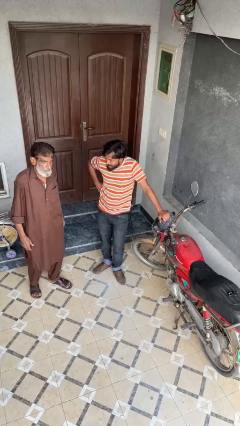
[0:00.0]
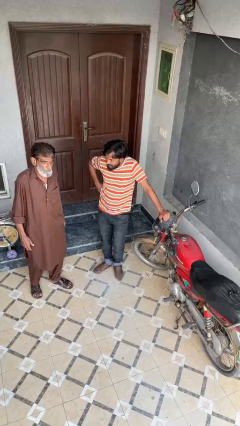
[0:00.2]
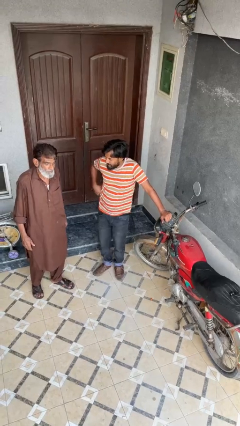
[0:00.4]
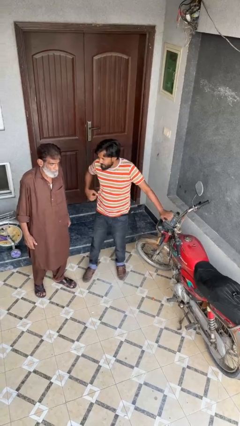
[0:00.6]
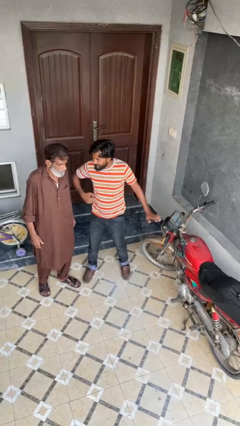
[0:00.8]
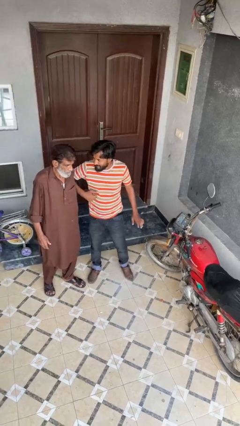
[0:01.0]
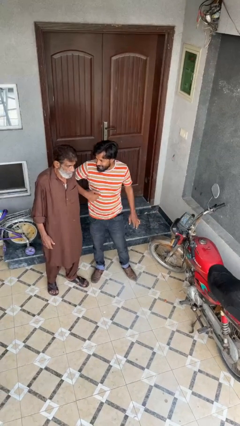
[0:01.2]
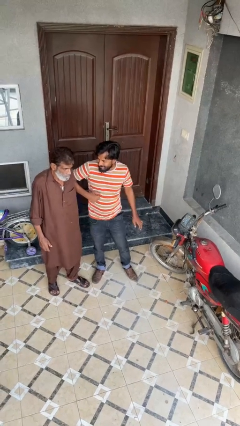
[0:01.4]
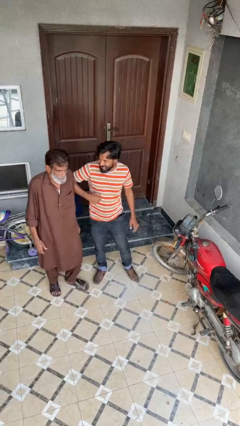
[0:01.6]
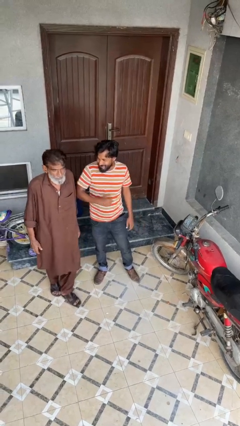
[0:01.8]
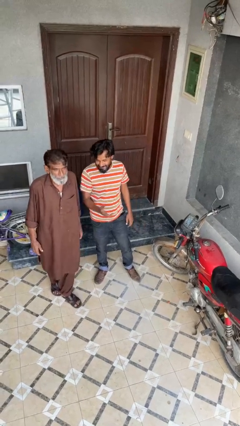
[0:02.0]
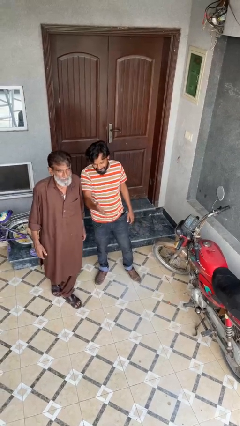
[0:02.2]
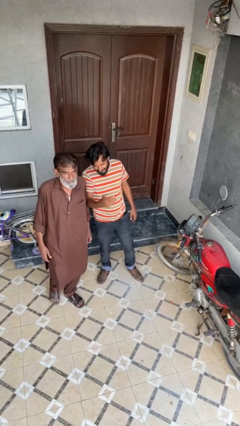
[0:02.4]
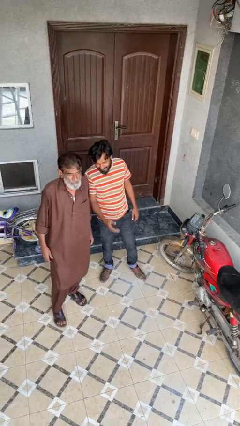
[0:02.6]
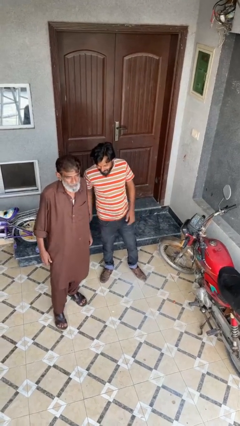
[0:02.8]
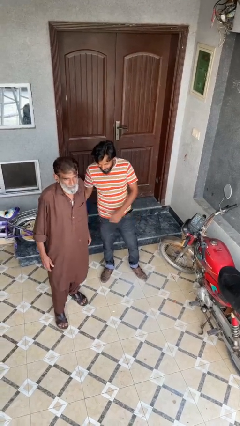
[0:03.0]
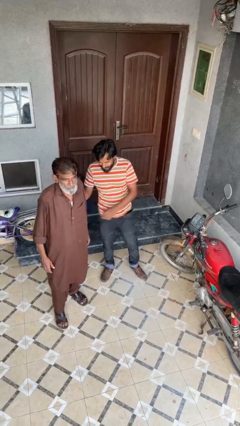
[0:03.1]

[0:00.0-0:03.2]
person nudges person with elbow

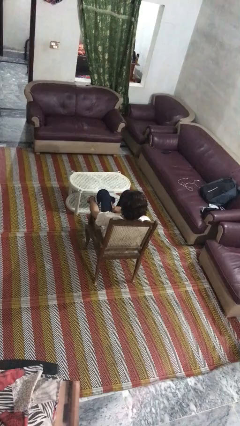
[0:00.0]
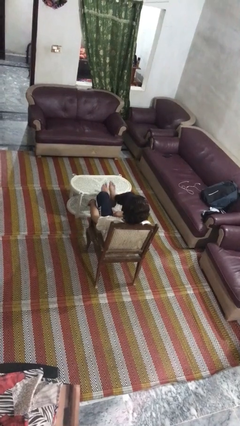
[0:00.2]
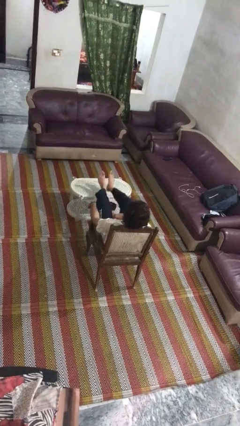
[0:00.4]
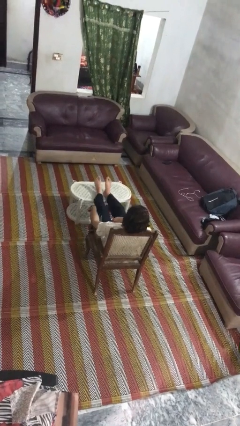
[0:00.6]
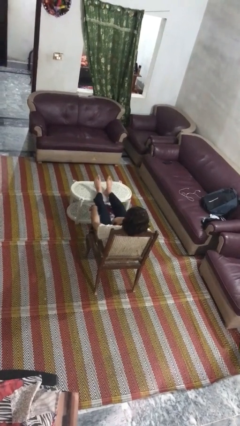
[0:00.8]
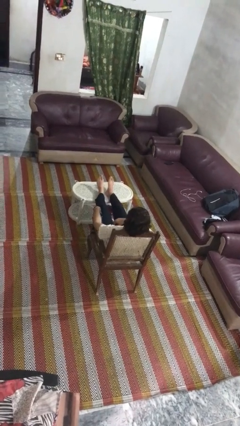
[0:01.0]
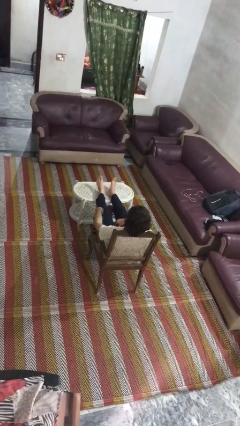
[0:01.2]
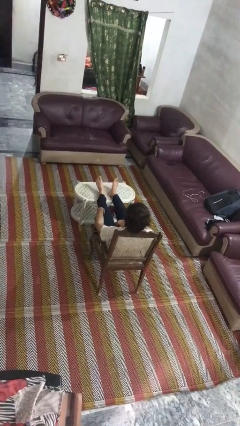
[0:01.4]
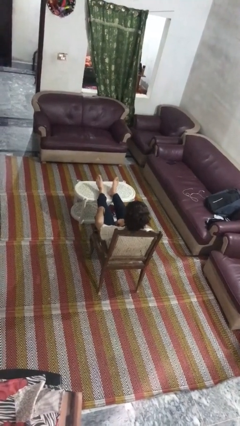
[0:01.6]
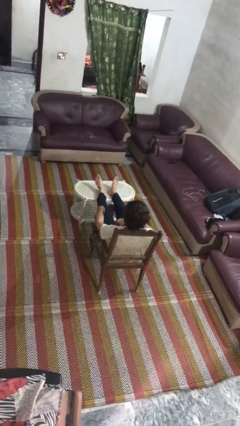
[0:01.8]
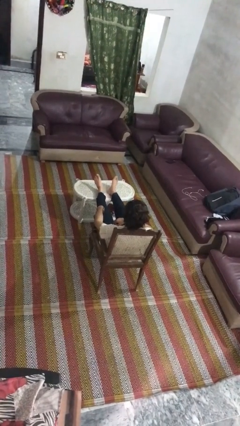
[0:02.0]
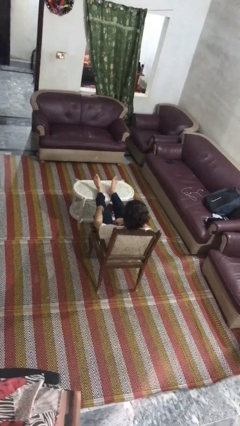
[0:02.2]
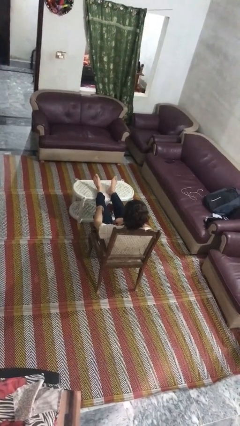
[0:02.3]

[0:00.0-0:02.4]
person puts feet up

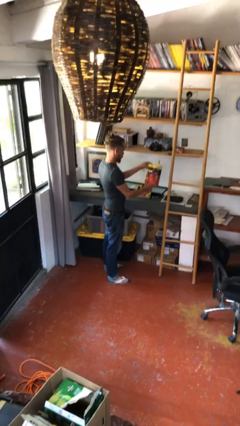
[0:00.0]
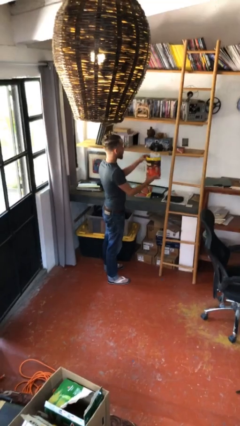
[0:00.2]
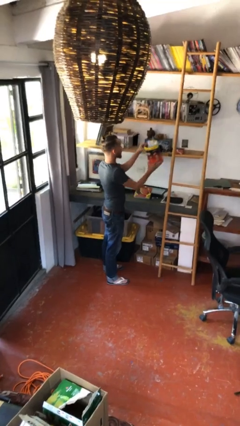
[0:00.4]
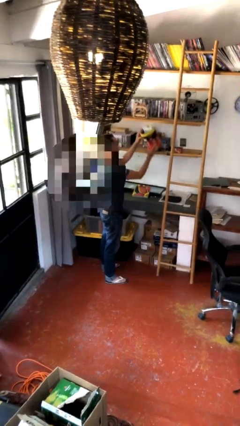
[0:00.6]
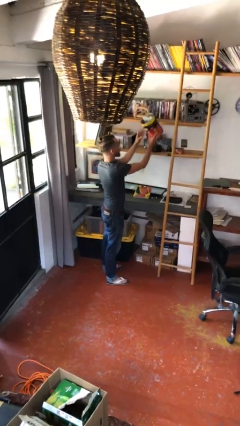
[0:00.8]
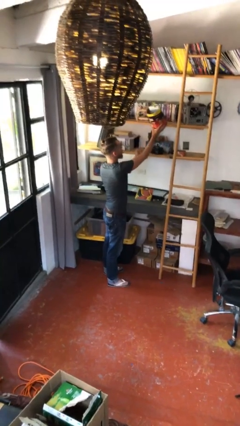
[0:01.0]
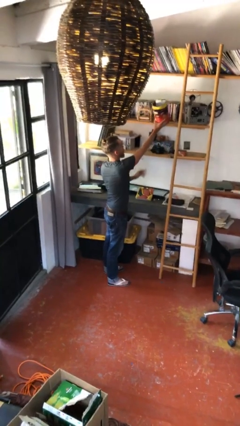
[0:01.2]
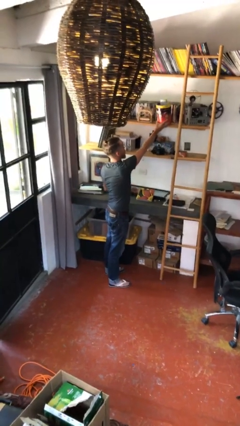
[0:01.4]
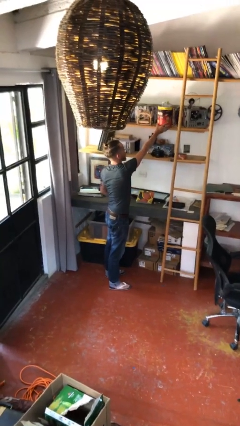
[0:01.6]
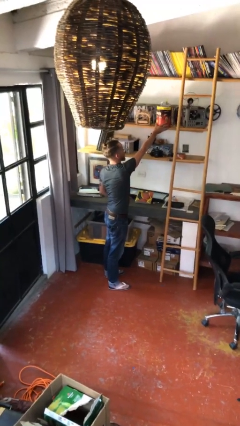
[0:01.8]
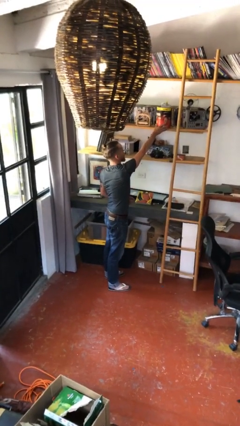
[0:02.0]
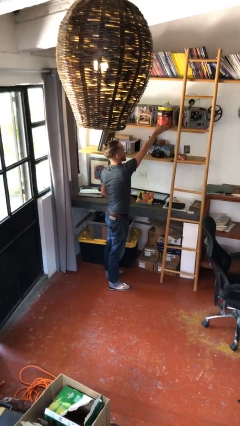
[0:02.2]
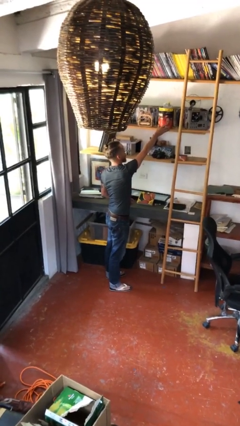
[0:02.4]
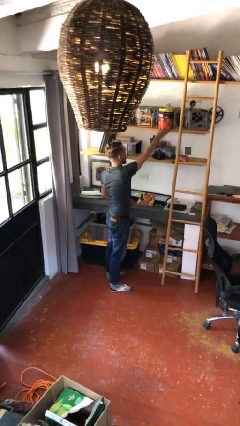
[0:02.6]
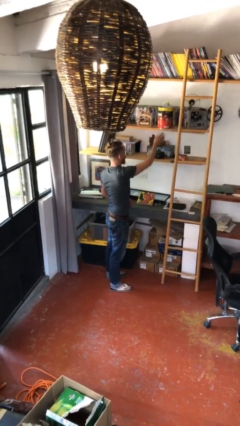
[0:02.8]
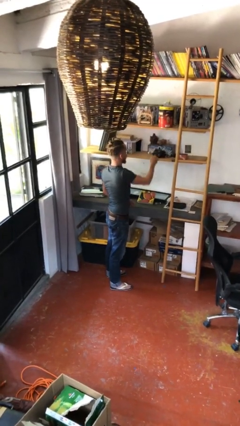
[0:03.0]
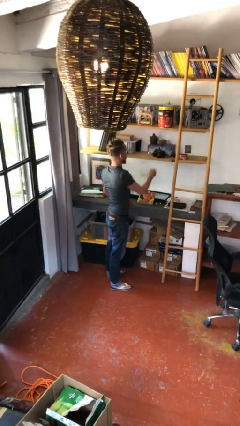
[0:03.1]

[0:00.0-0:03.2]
person puts down object on shelf

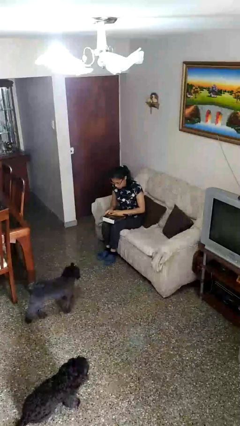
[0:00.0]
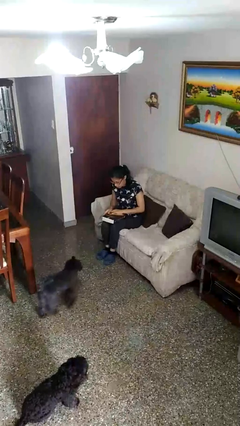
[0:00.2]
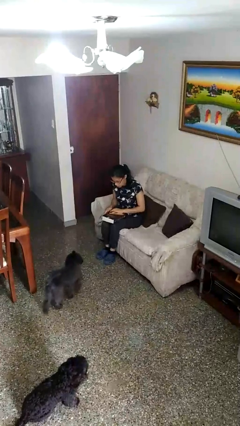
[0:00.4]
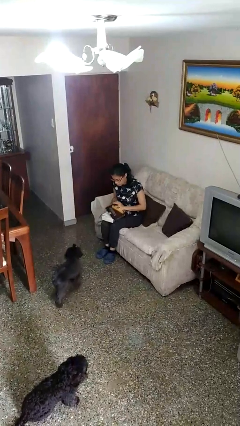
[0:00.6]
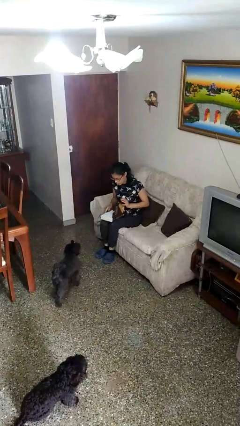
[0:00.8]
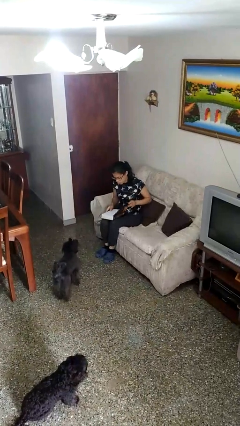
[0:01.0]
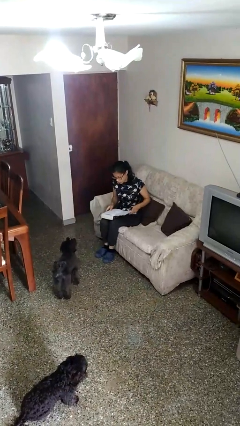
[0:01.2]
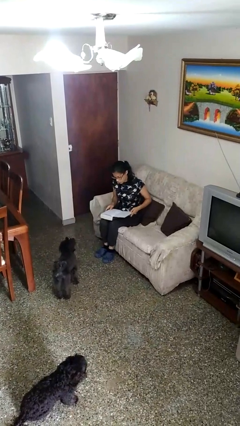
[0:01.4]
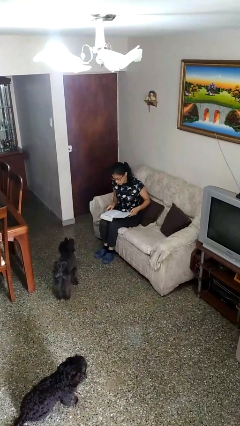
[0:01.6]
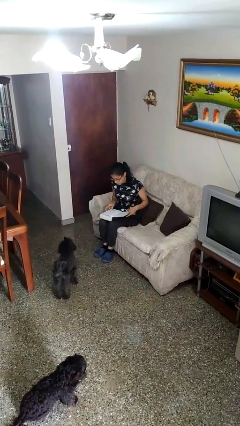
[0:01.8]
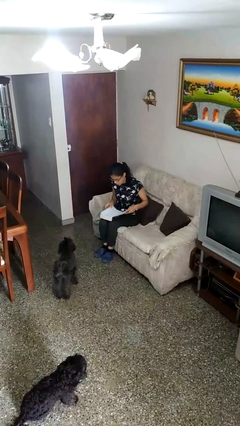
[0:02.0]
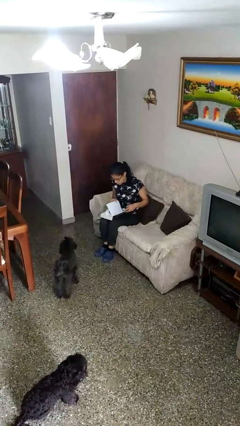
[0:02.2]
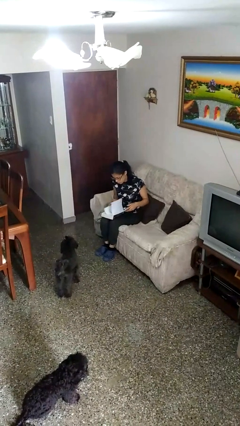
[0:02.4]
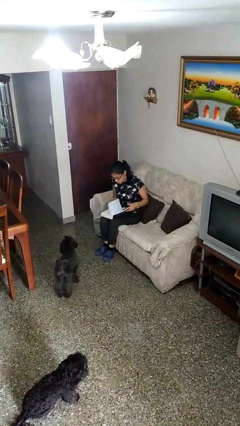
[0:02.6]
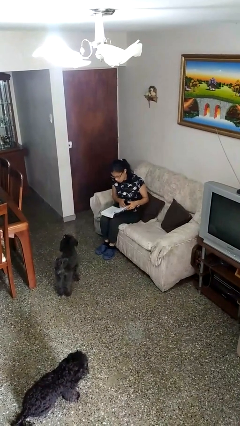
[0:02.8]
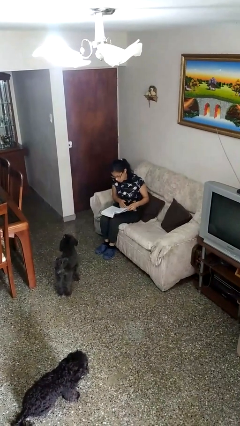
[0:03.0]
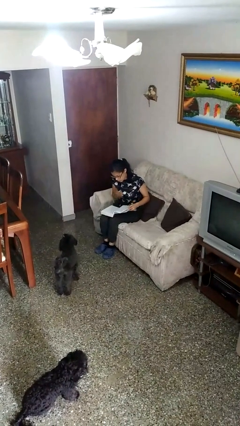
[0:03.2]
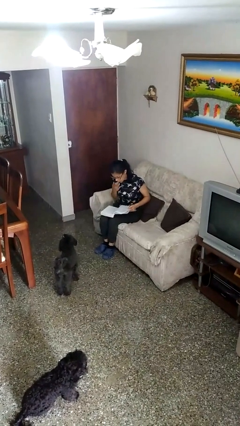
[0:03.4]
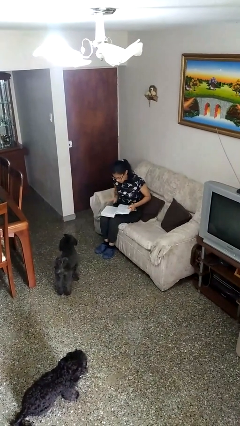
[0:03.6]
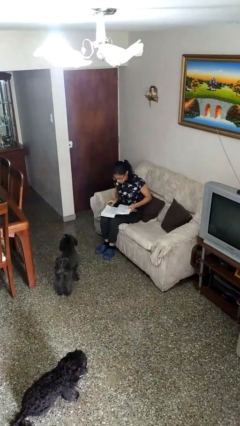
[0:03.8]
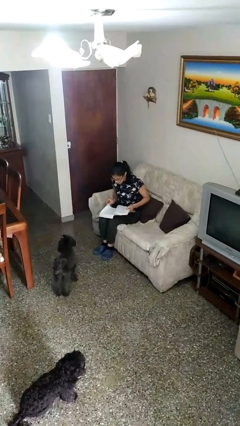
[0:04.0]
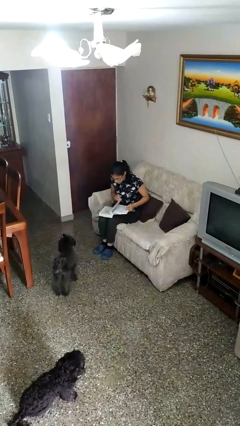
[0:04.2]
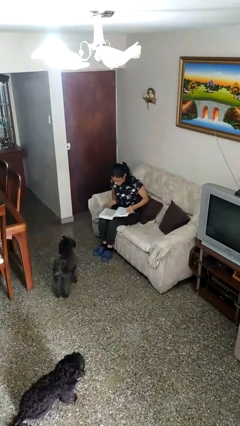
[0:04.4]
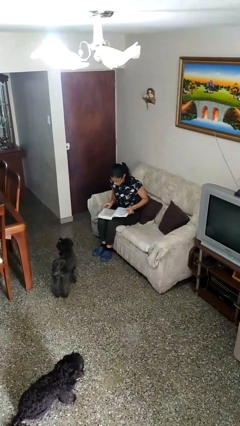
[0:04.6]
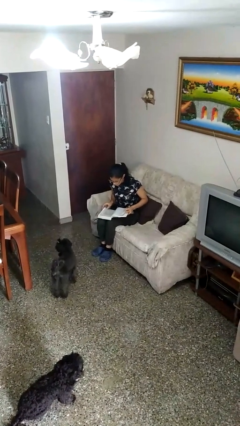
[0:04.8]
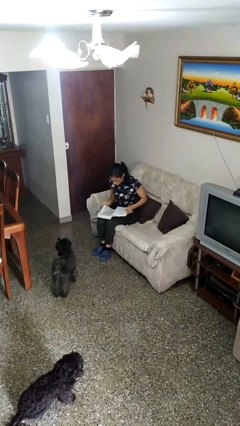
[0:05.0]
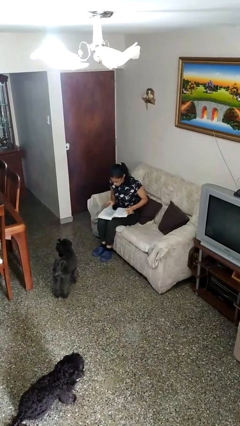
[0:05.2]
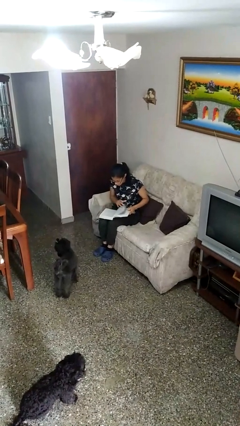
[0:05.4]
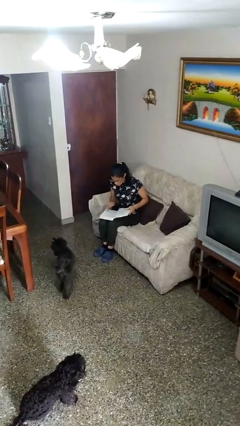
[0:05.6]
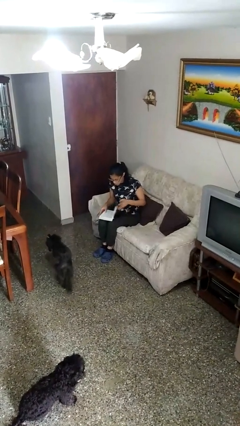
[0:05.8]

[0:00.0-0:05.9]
person reads book

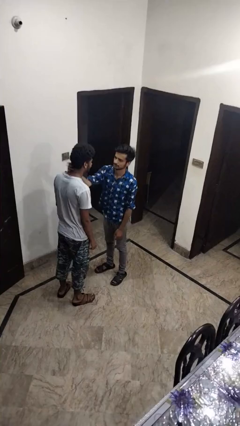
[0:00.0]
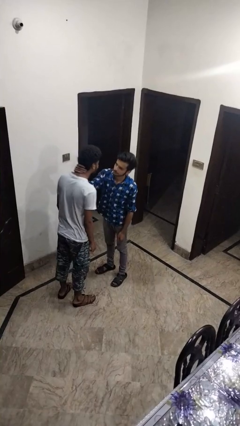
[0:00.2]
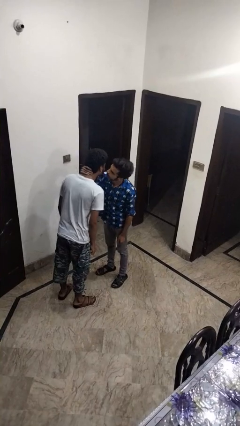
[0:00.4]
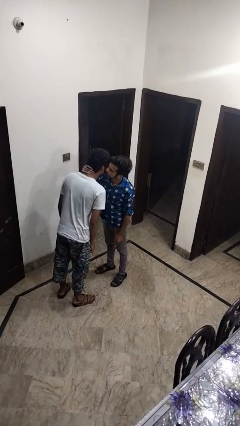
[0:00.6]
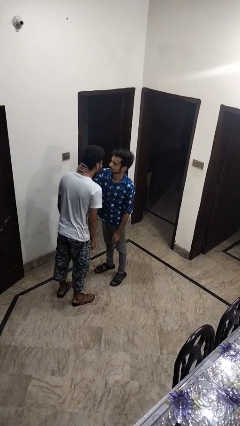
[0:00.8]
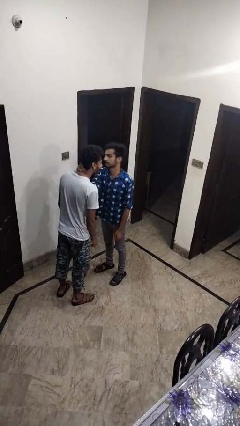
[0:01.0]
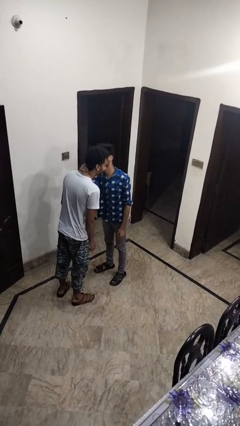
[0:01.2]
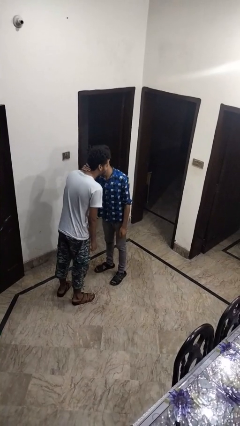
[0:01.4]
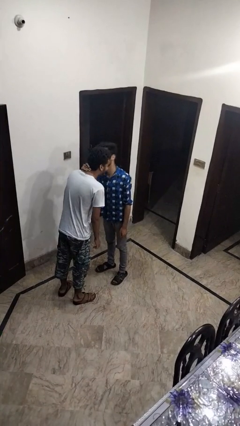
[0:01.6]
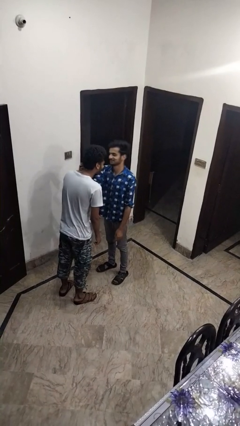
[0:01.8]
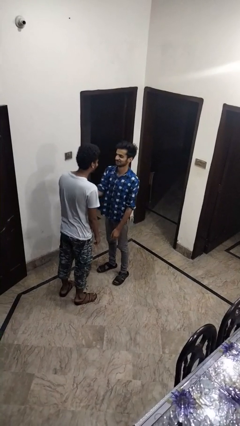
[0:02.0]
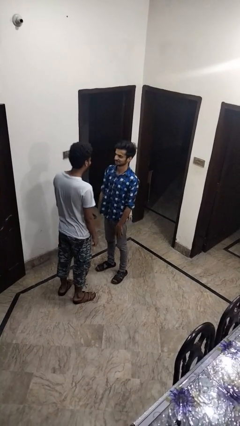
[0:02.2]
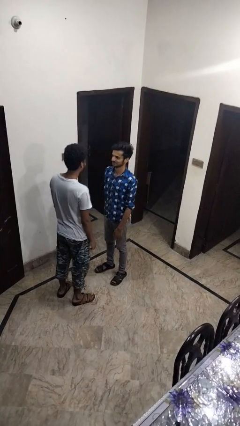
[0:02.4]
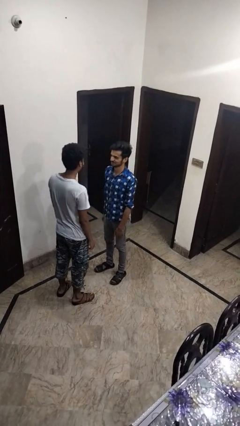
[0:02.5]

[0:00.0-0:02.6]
person kisses cheek of person
